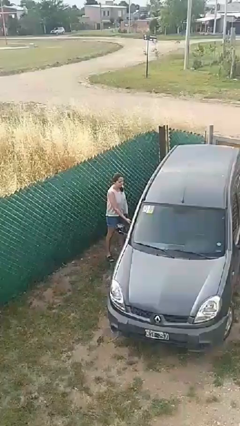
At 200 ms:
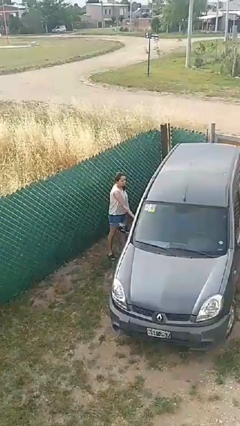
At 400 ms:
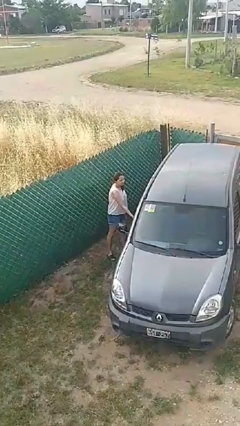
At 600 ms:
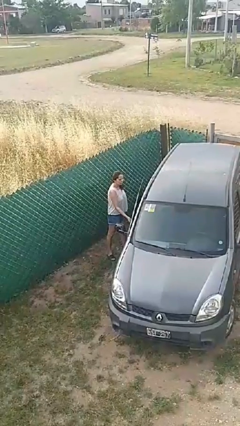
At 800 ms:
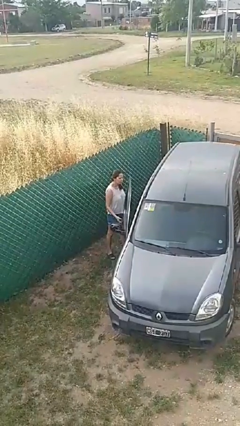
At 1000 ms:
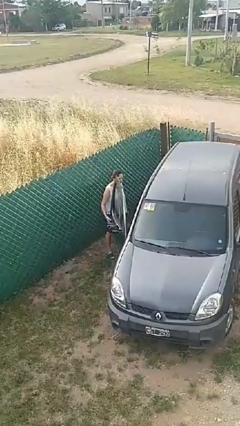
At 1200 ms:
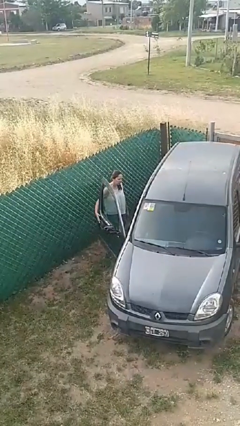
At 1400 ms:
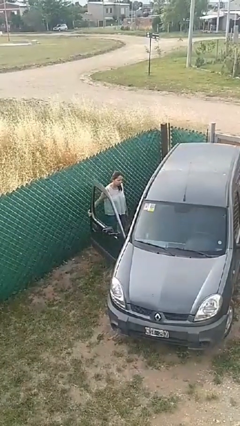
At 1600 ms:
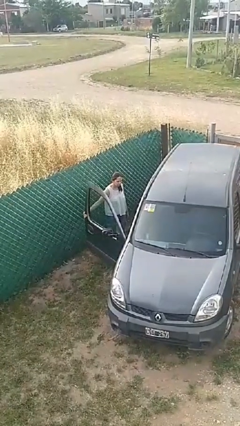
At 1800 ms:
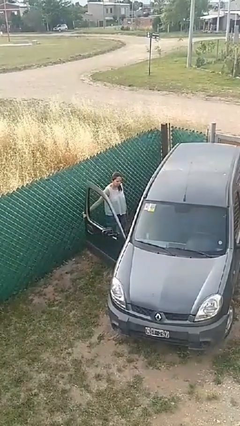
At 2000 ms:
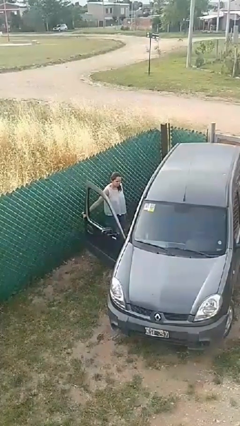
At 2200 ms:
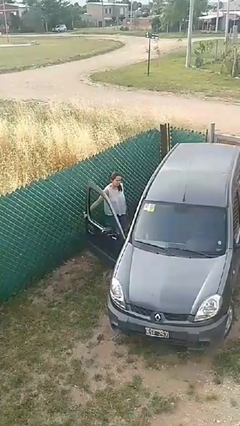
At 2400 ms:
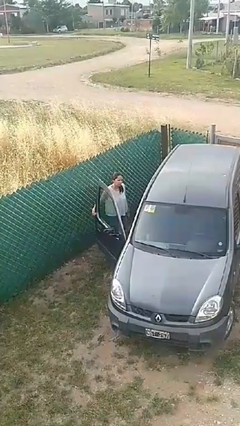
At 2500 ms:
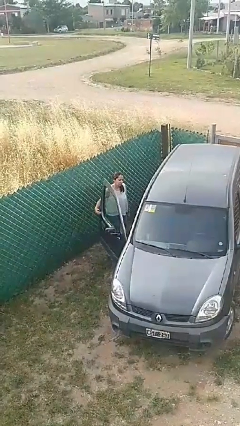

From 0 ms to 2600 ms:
person opens car door

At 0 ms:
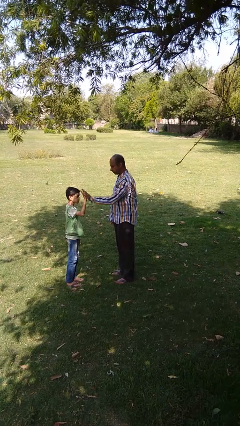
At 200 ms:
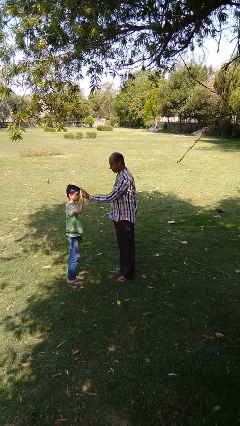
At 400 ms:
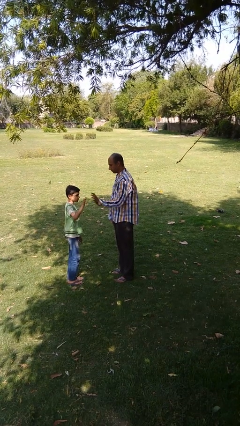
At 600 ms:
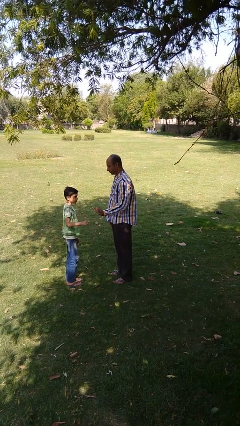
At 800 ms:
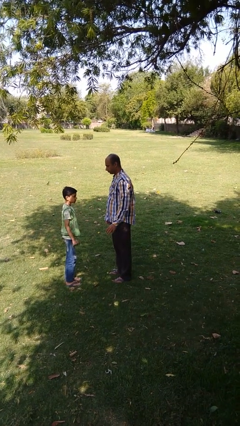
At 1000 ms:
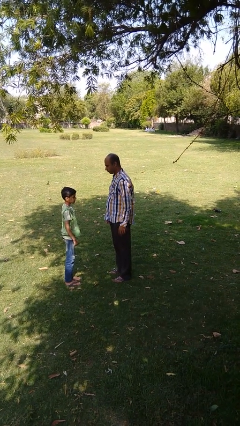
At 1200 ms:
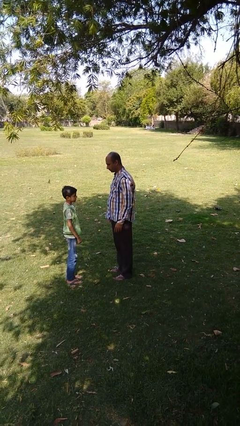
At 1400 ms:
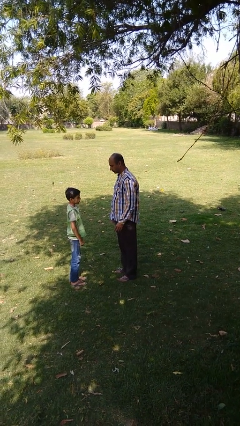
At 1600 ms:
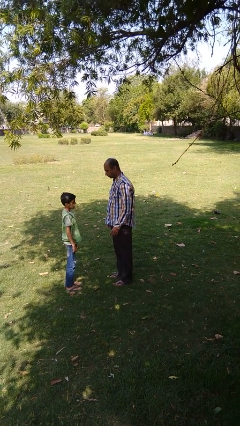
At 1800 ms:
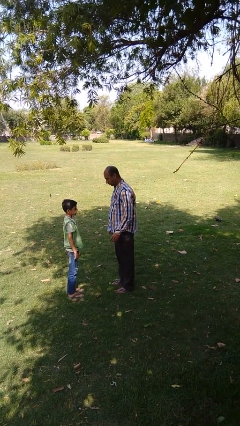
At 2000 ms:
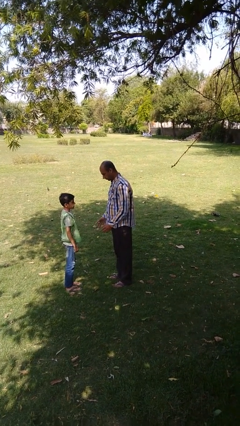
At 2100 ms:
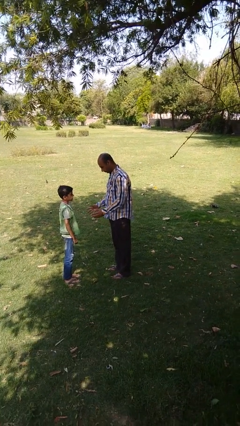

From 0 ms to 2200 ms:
person highfives hand

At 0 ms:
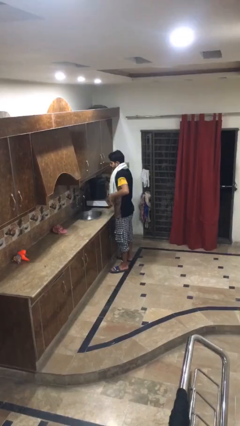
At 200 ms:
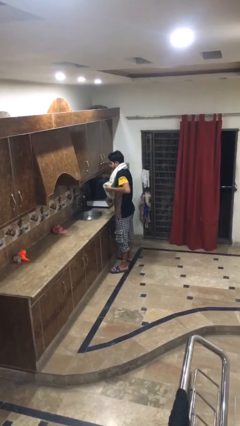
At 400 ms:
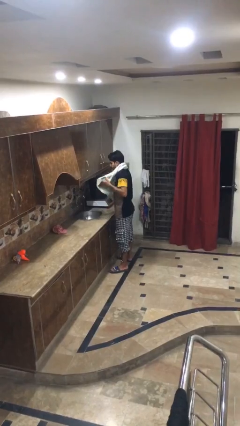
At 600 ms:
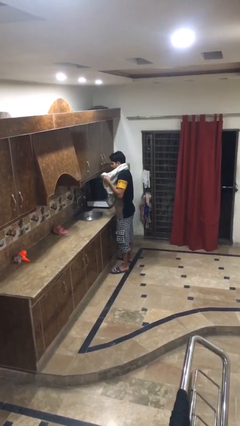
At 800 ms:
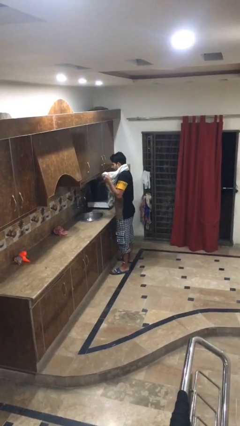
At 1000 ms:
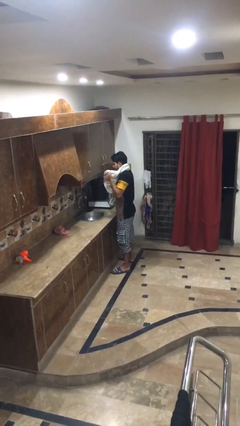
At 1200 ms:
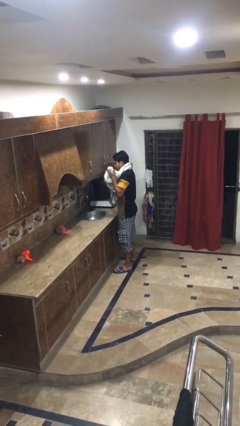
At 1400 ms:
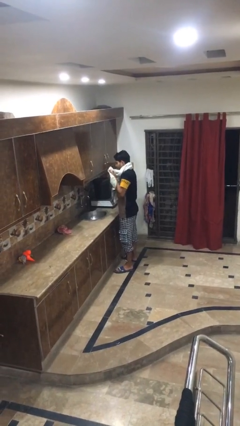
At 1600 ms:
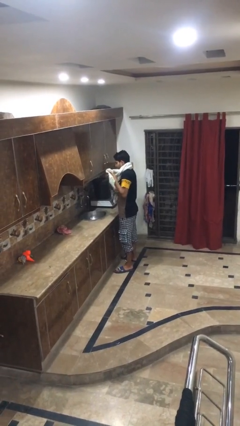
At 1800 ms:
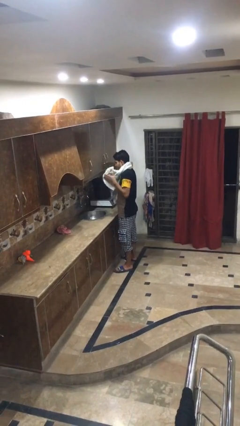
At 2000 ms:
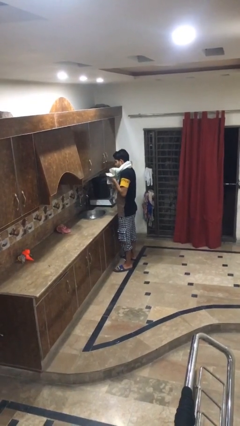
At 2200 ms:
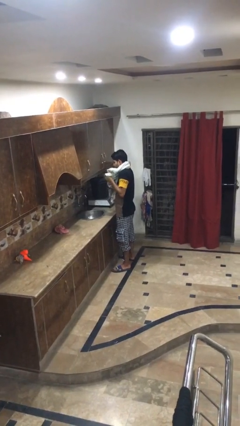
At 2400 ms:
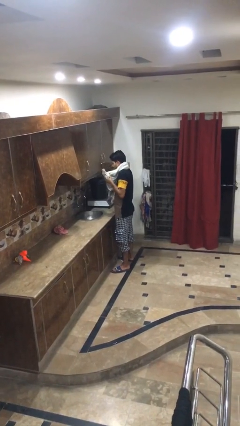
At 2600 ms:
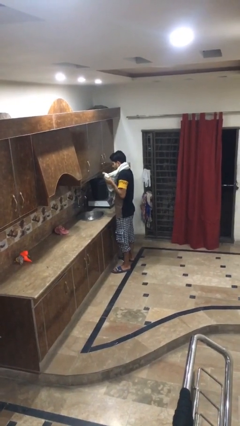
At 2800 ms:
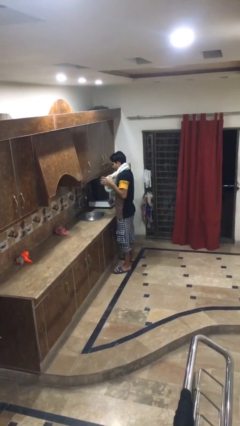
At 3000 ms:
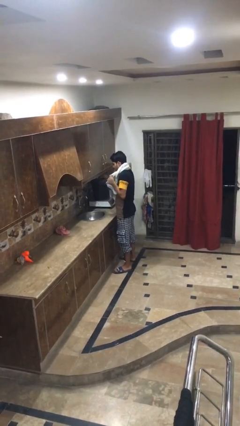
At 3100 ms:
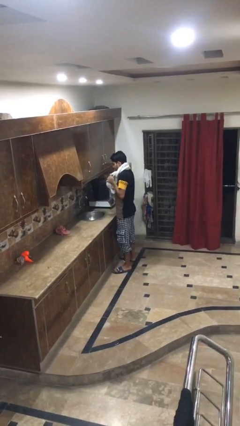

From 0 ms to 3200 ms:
person dries hands with towel

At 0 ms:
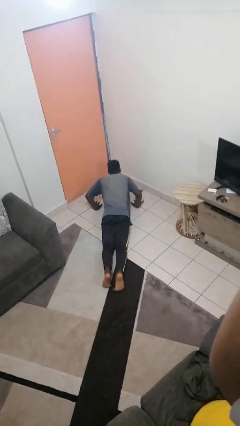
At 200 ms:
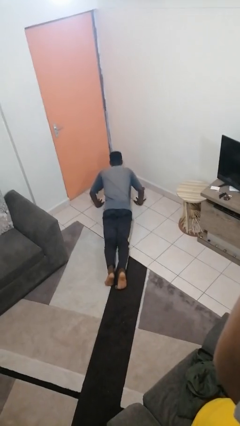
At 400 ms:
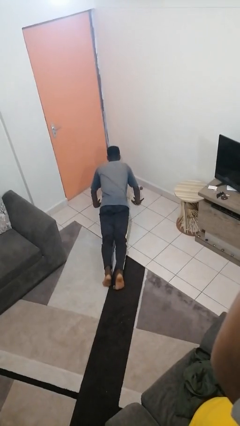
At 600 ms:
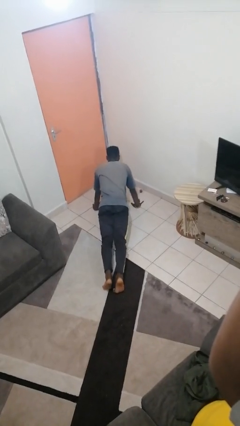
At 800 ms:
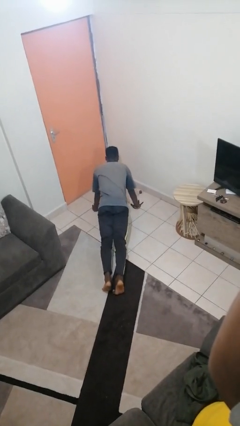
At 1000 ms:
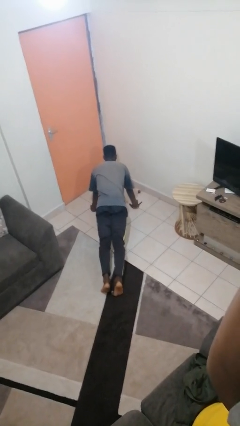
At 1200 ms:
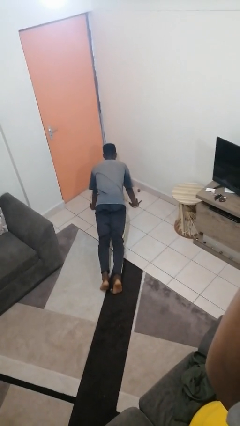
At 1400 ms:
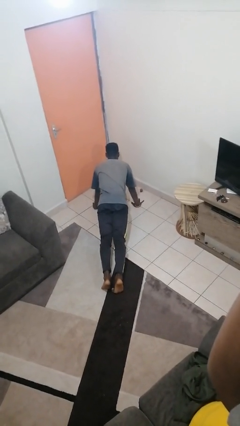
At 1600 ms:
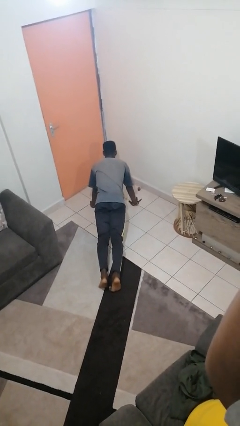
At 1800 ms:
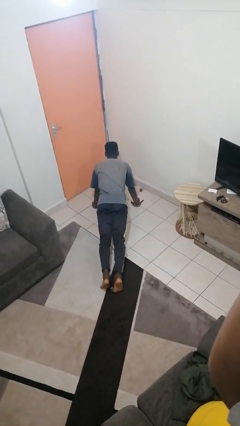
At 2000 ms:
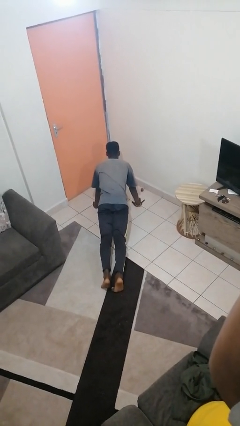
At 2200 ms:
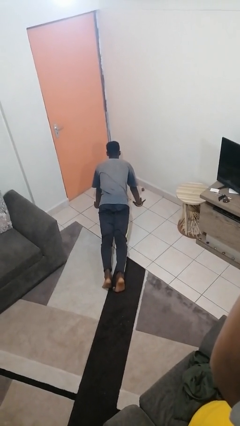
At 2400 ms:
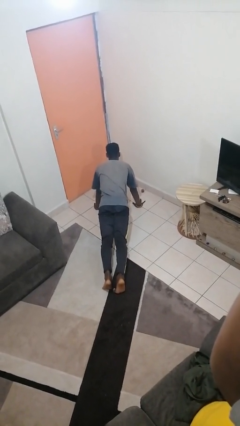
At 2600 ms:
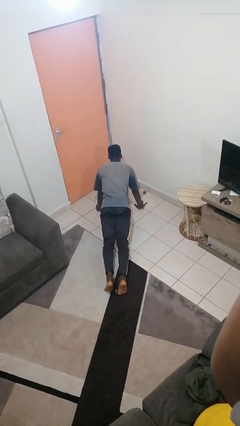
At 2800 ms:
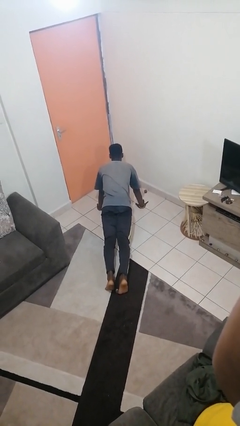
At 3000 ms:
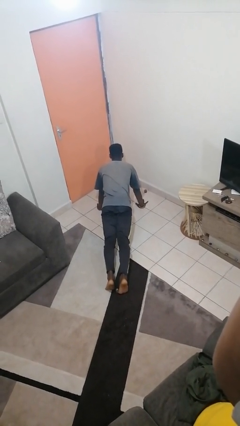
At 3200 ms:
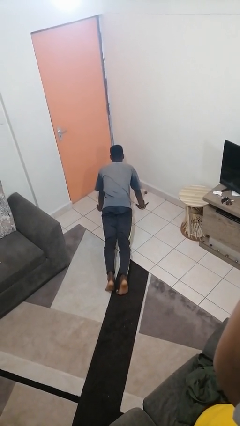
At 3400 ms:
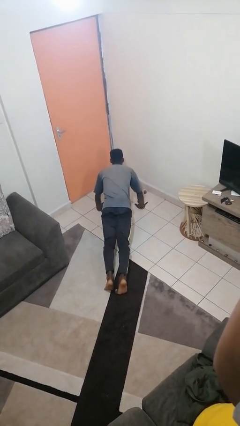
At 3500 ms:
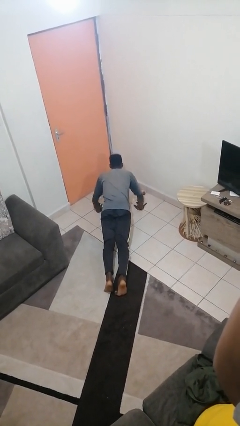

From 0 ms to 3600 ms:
person exercises with pushup

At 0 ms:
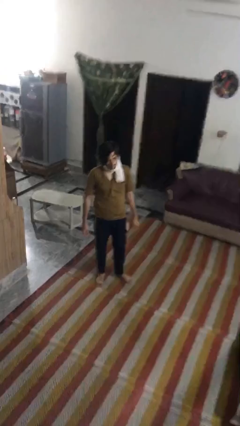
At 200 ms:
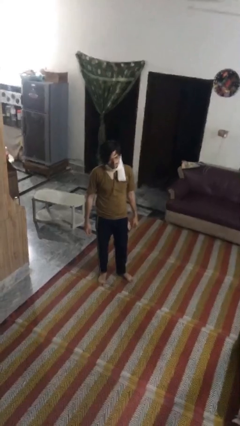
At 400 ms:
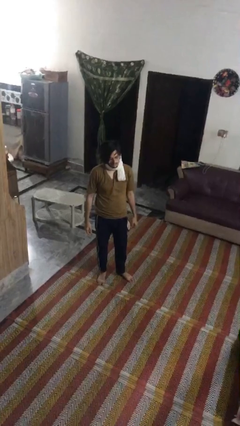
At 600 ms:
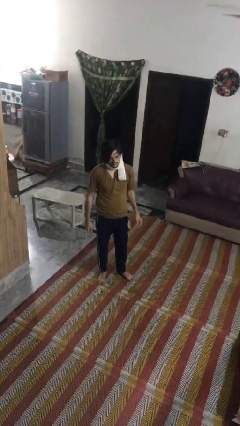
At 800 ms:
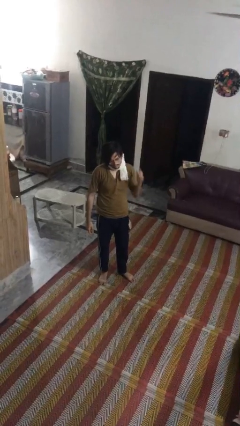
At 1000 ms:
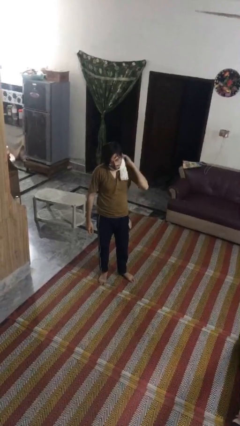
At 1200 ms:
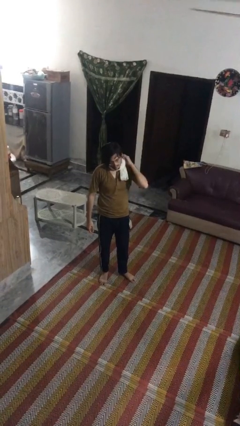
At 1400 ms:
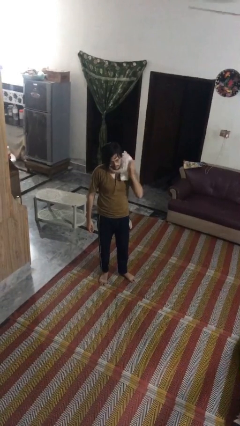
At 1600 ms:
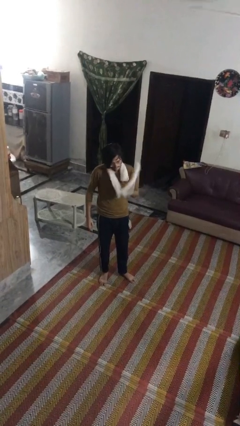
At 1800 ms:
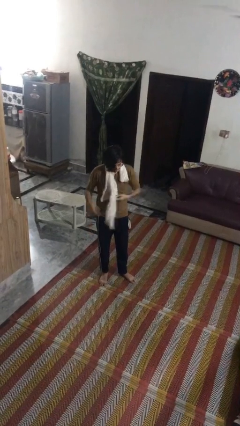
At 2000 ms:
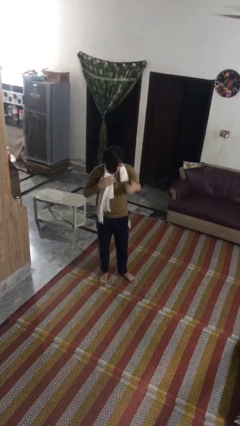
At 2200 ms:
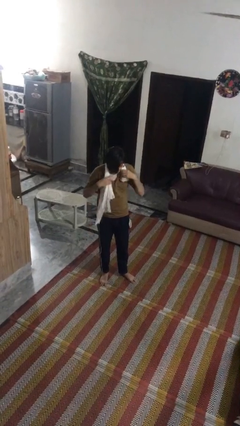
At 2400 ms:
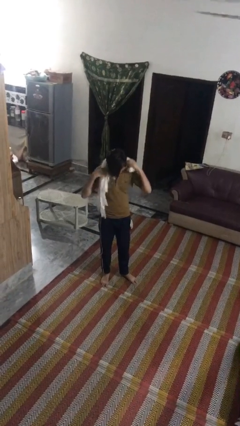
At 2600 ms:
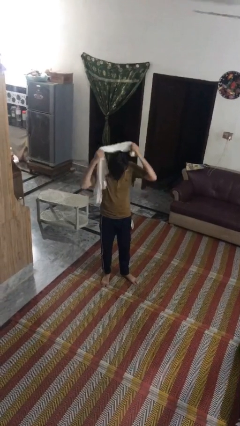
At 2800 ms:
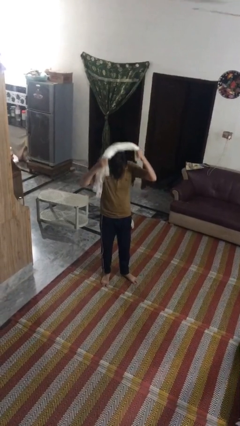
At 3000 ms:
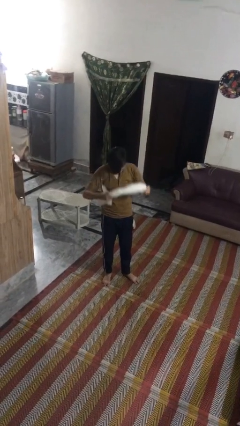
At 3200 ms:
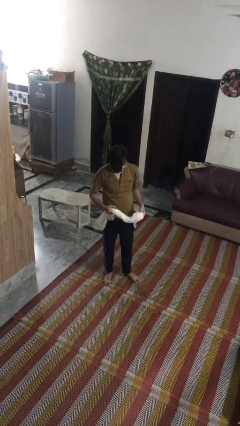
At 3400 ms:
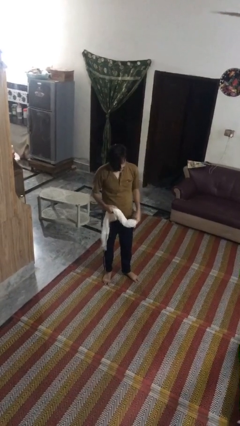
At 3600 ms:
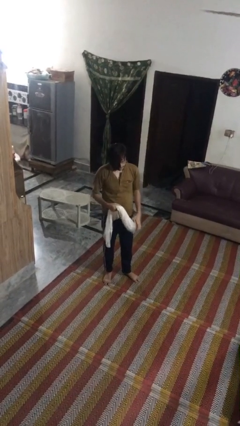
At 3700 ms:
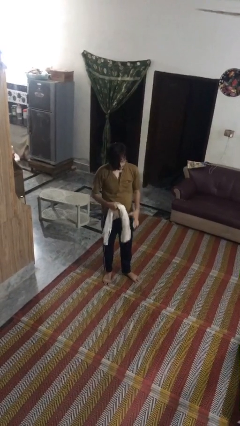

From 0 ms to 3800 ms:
person takes off scarf

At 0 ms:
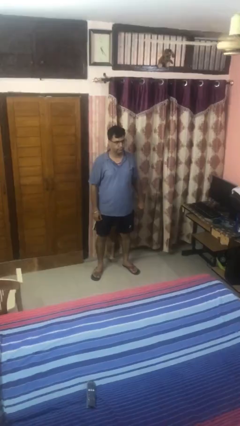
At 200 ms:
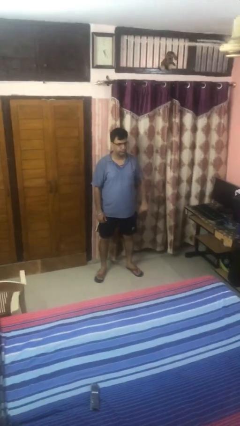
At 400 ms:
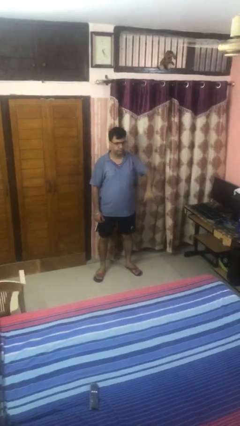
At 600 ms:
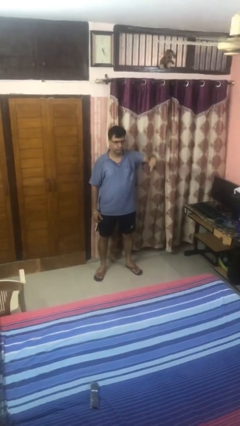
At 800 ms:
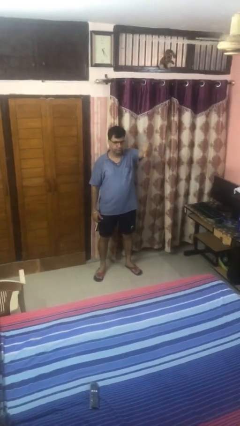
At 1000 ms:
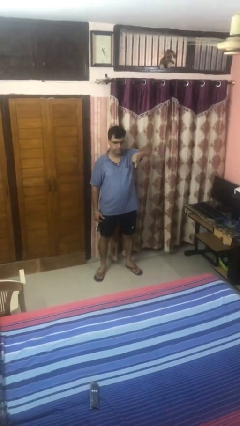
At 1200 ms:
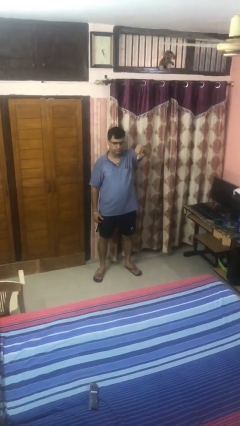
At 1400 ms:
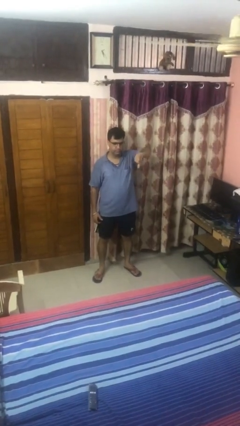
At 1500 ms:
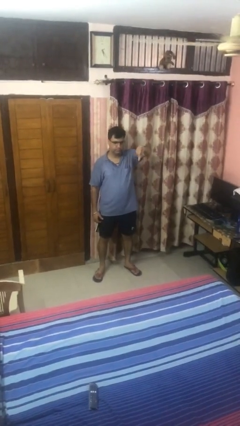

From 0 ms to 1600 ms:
person gestures thumbs down

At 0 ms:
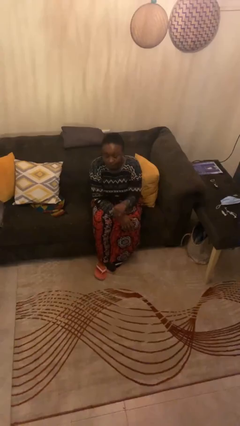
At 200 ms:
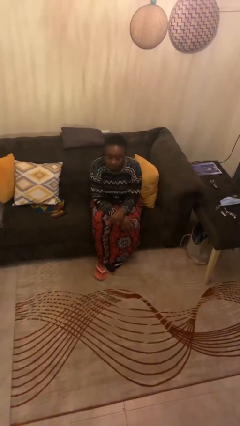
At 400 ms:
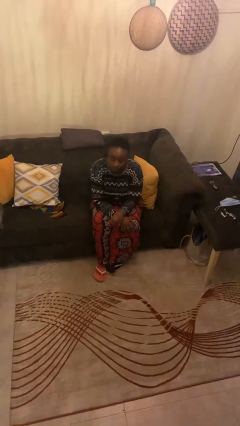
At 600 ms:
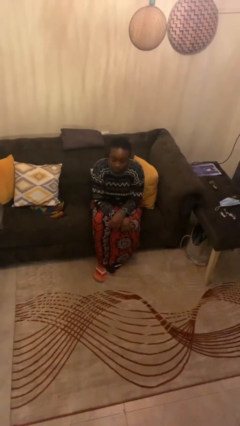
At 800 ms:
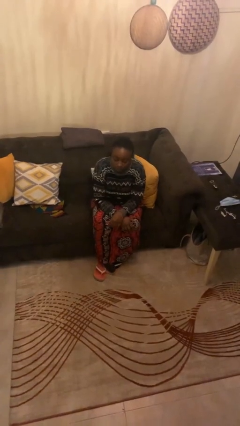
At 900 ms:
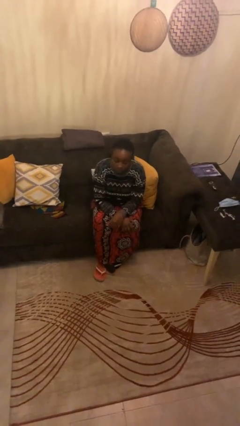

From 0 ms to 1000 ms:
person gestures lower hand
